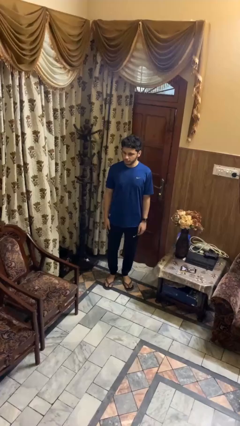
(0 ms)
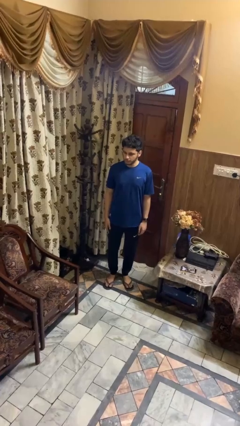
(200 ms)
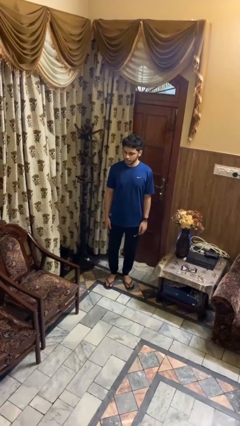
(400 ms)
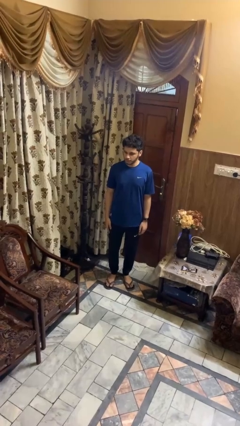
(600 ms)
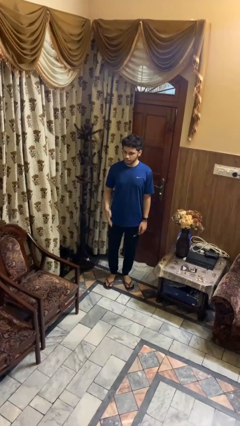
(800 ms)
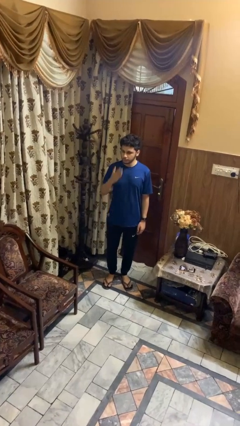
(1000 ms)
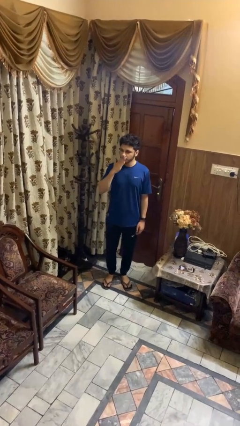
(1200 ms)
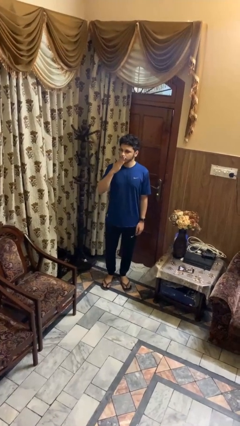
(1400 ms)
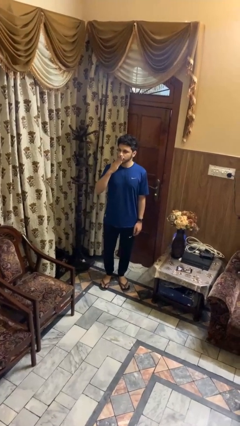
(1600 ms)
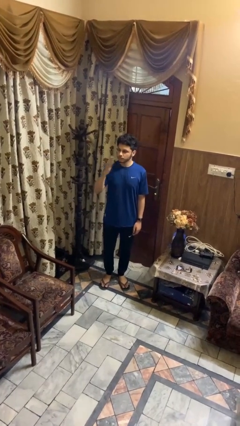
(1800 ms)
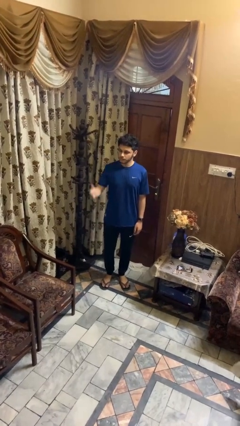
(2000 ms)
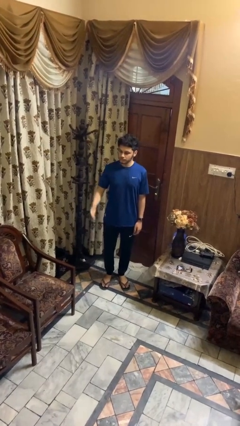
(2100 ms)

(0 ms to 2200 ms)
person gestures blow kiss

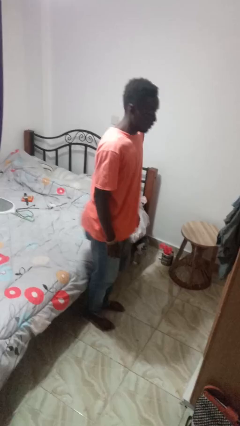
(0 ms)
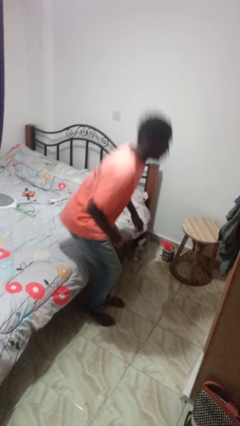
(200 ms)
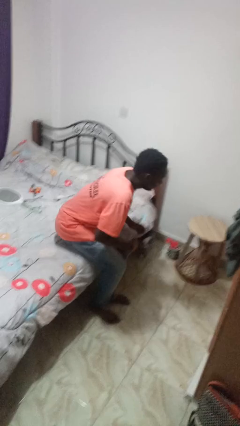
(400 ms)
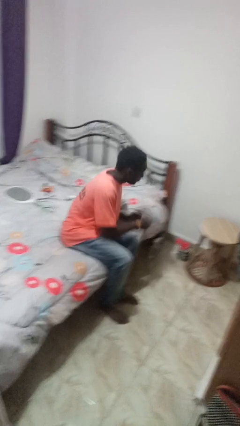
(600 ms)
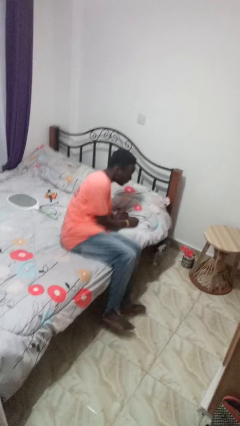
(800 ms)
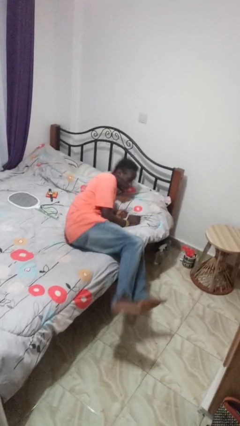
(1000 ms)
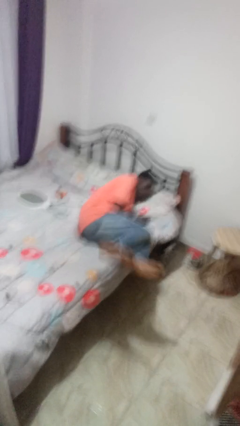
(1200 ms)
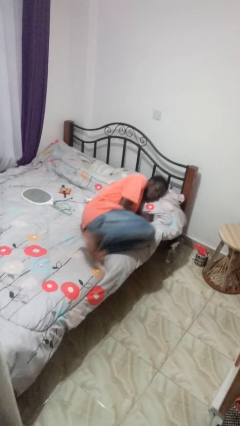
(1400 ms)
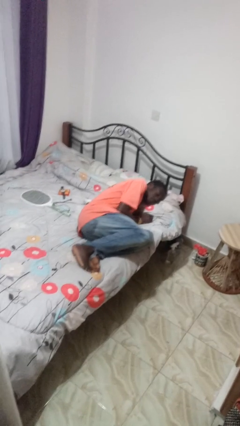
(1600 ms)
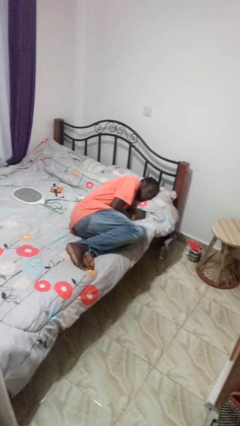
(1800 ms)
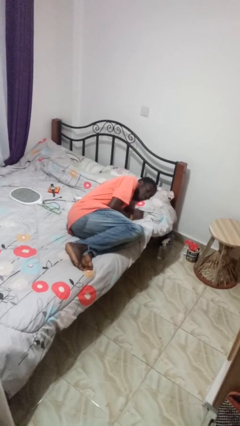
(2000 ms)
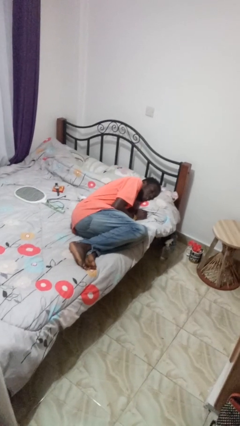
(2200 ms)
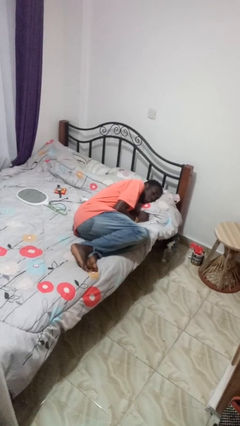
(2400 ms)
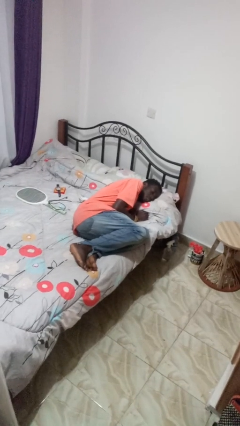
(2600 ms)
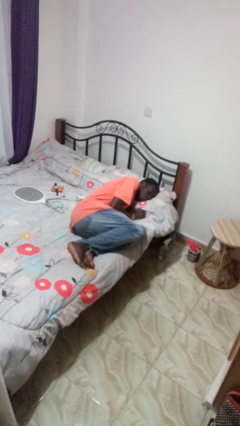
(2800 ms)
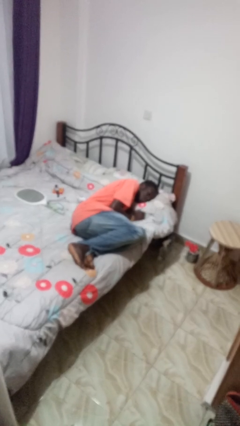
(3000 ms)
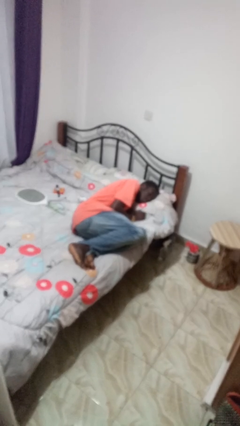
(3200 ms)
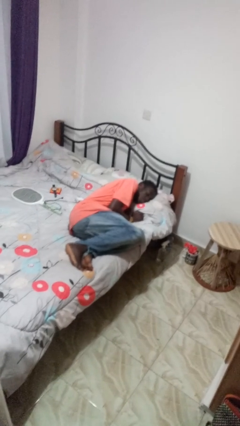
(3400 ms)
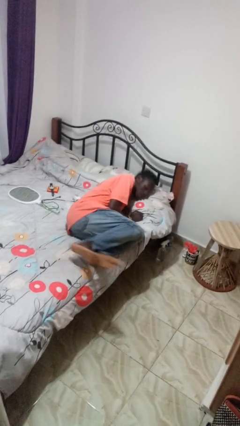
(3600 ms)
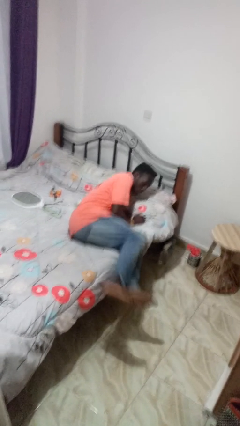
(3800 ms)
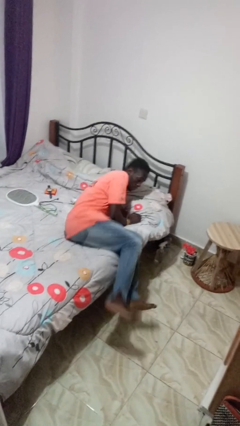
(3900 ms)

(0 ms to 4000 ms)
person lies down on bed

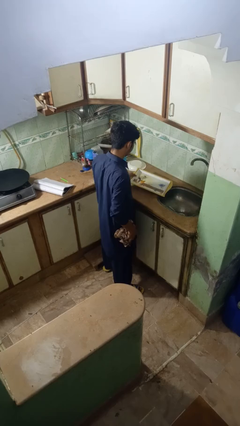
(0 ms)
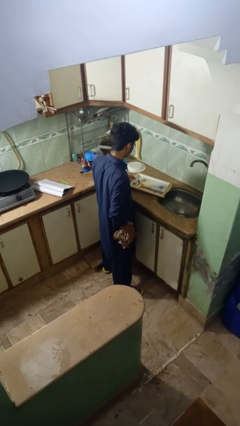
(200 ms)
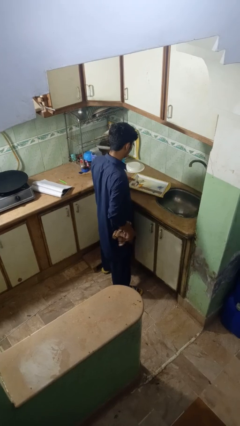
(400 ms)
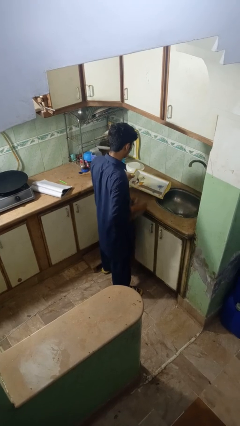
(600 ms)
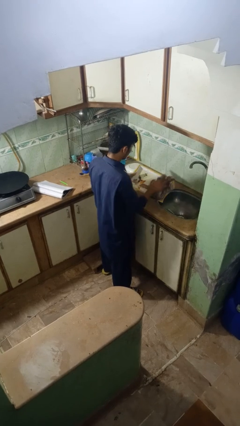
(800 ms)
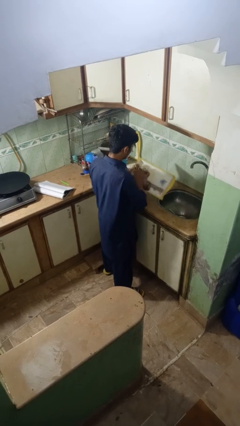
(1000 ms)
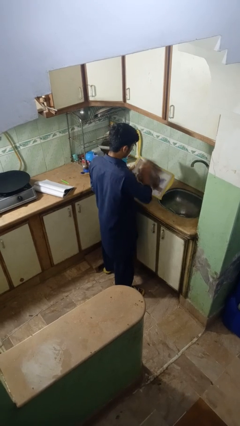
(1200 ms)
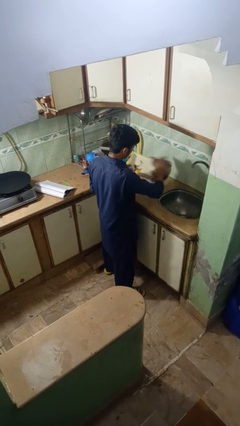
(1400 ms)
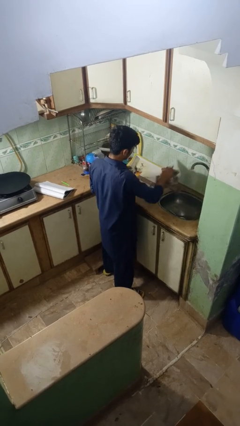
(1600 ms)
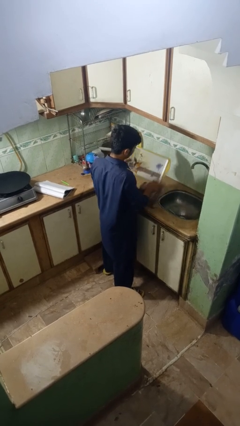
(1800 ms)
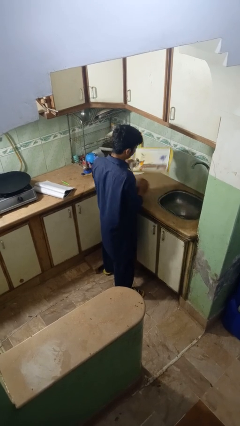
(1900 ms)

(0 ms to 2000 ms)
person dries dish

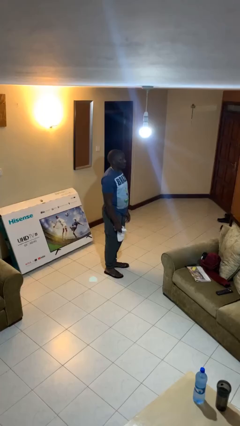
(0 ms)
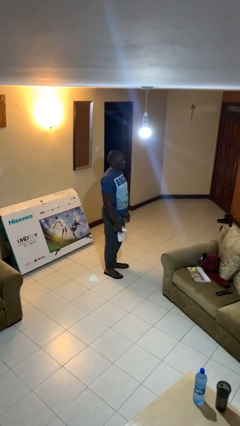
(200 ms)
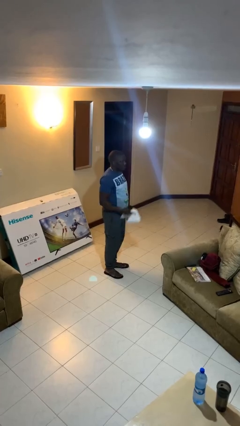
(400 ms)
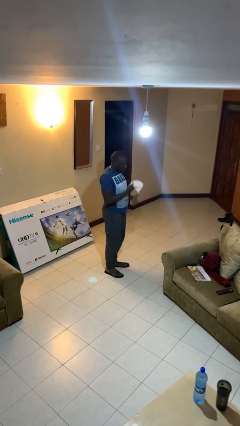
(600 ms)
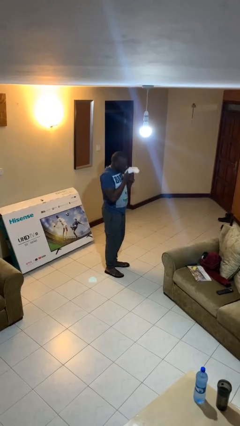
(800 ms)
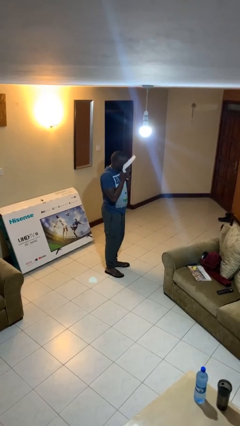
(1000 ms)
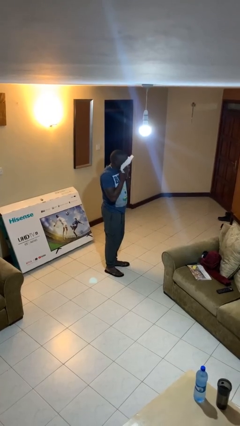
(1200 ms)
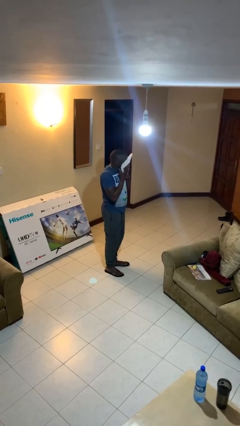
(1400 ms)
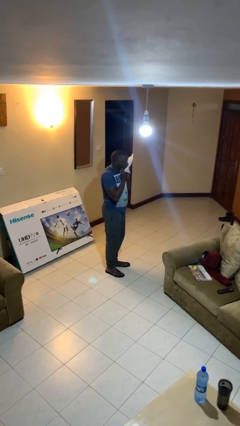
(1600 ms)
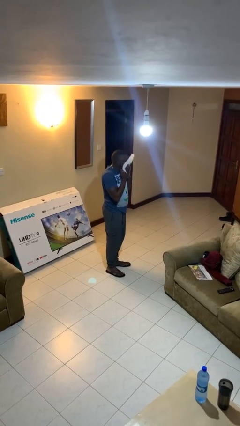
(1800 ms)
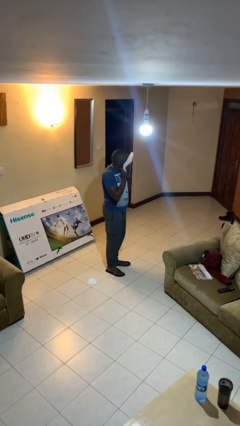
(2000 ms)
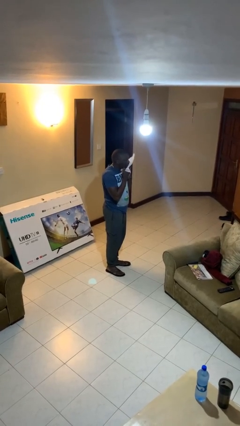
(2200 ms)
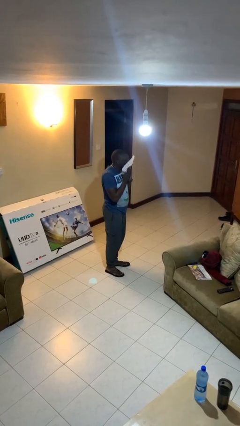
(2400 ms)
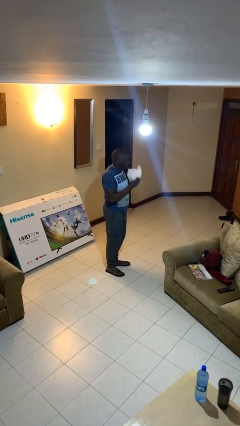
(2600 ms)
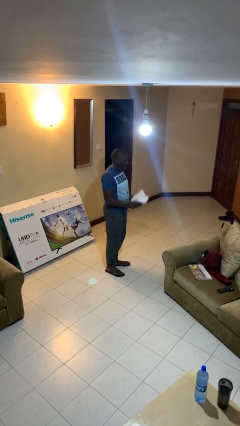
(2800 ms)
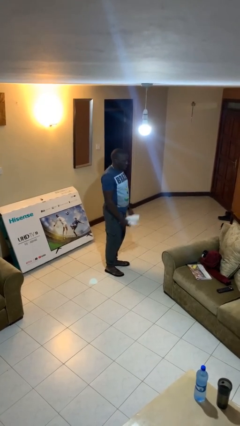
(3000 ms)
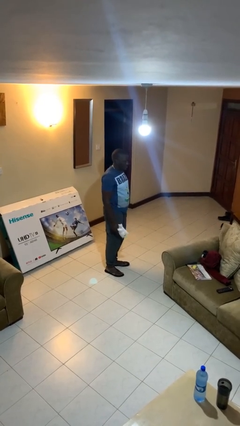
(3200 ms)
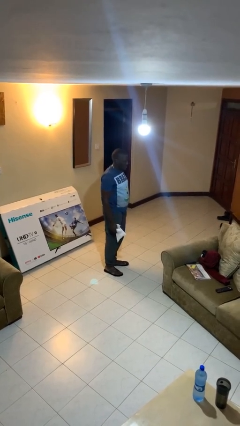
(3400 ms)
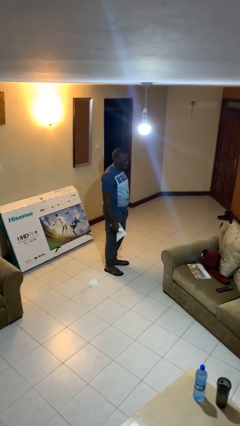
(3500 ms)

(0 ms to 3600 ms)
person wipes mouth with napkin

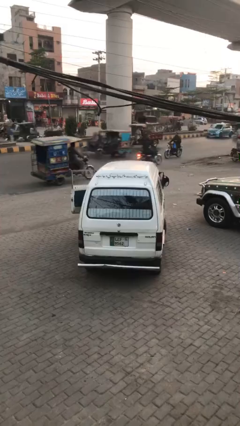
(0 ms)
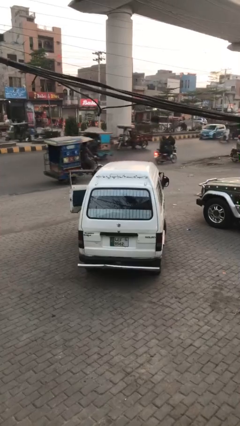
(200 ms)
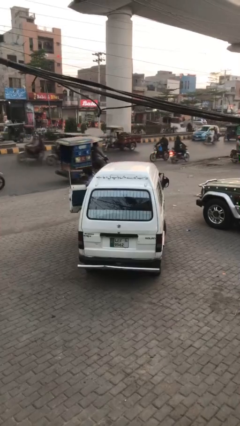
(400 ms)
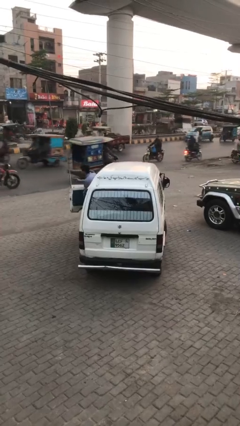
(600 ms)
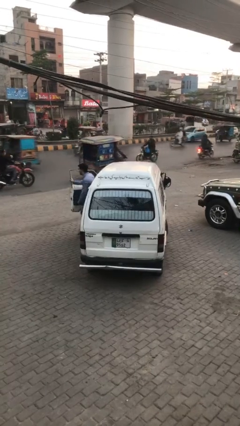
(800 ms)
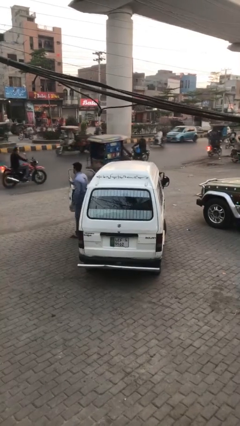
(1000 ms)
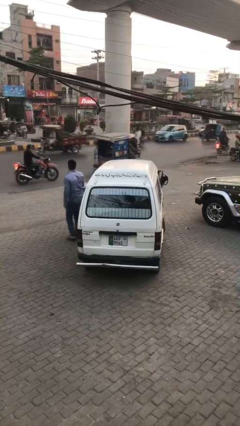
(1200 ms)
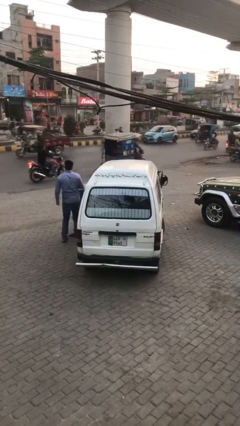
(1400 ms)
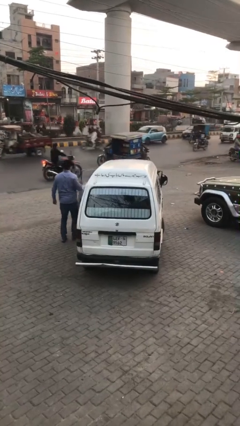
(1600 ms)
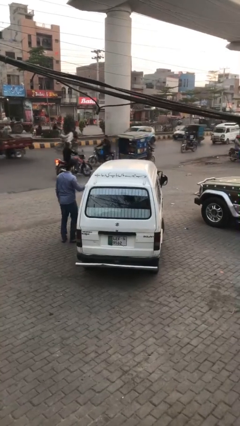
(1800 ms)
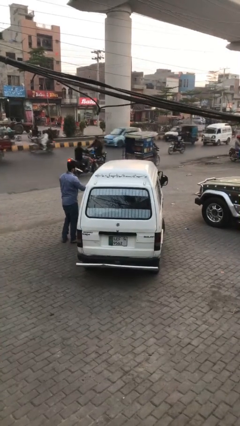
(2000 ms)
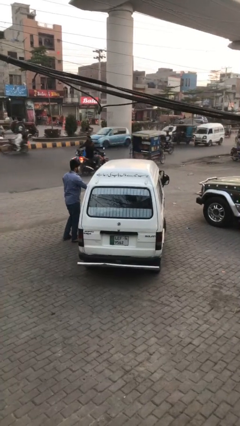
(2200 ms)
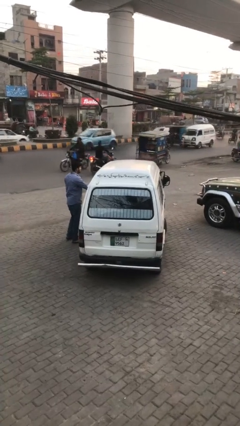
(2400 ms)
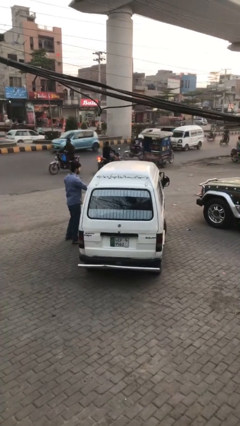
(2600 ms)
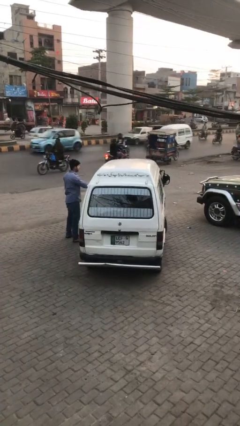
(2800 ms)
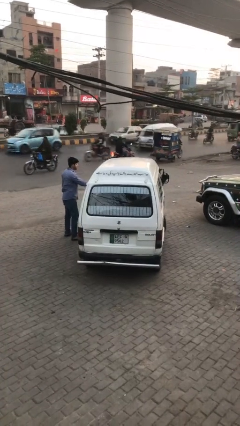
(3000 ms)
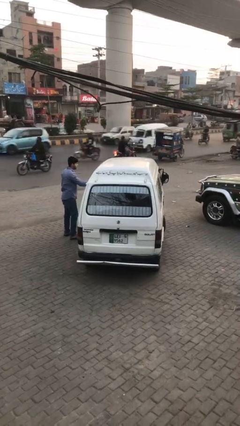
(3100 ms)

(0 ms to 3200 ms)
car drops off person

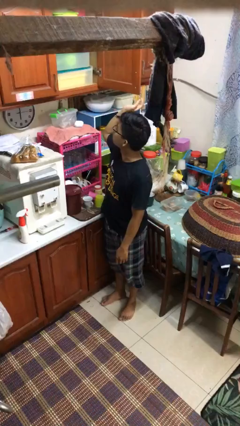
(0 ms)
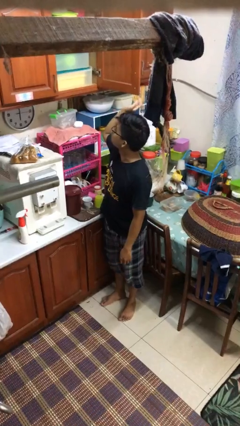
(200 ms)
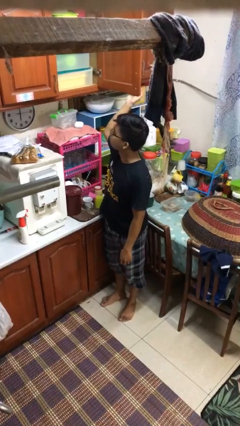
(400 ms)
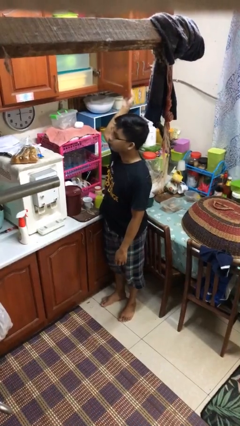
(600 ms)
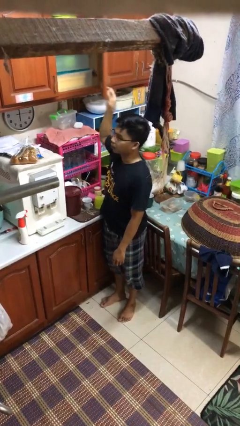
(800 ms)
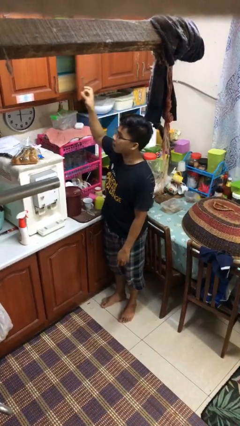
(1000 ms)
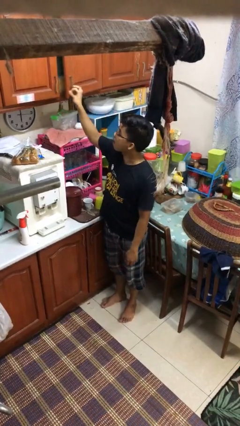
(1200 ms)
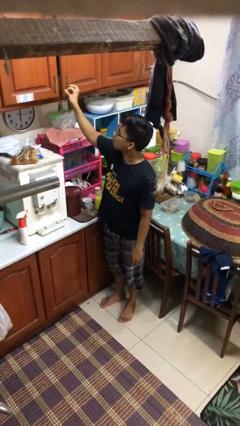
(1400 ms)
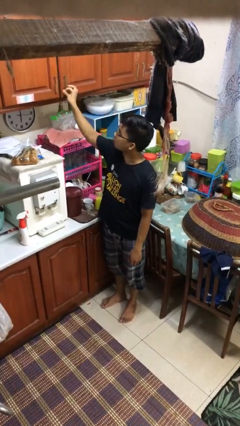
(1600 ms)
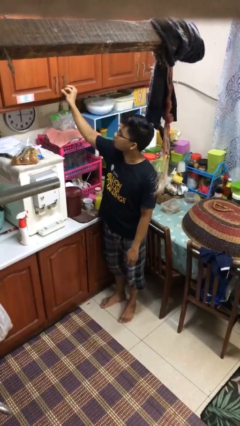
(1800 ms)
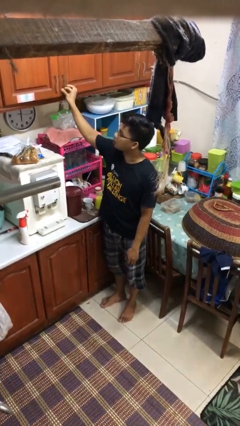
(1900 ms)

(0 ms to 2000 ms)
person closes kitchen drawer

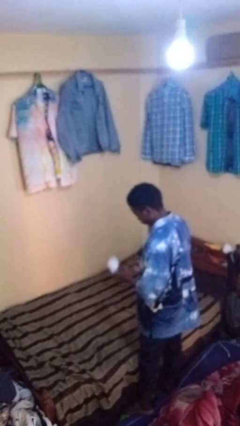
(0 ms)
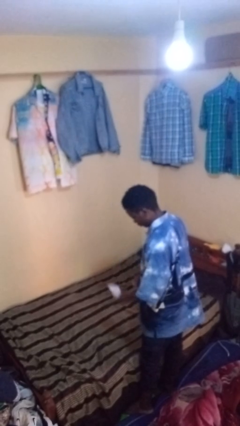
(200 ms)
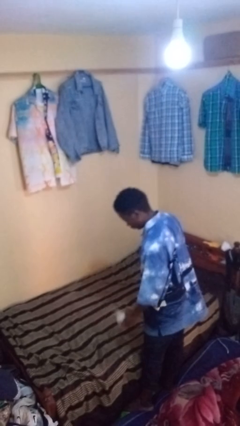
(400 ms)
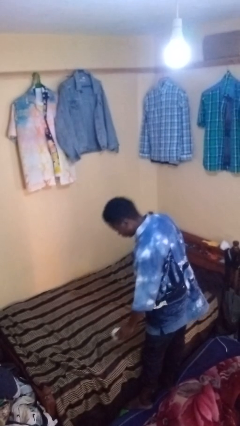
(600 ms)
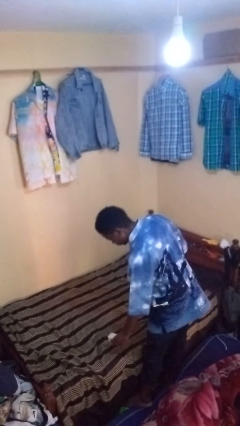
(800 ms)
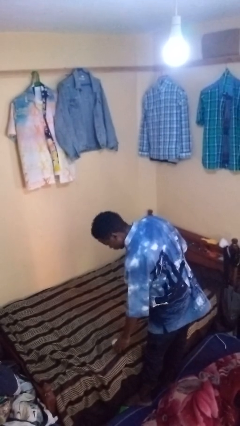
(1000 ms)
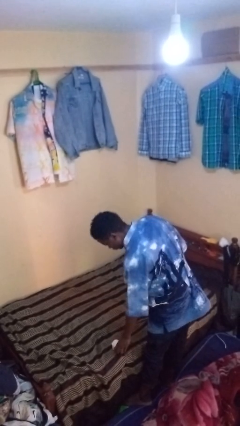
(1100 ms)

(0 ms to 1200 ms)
person puts down object on bed
